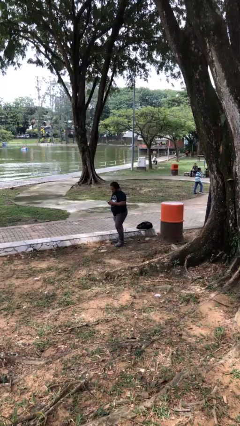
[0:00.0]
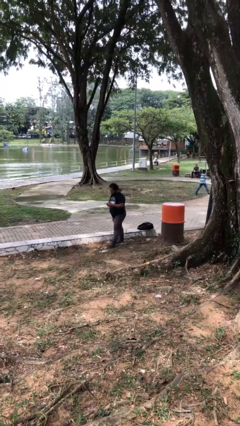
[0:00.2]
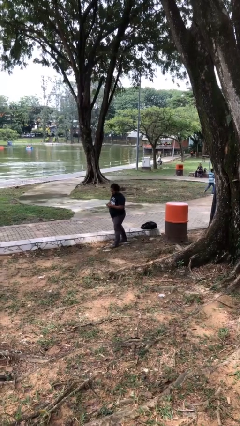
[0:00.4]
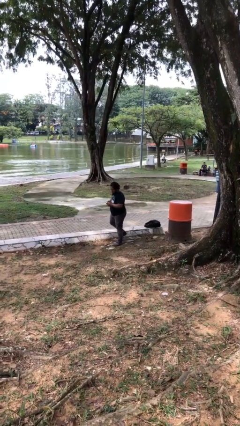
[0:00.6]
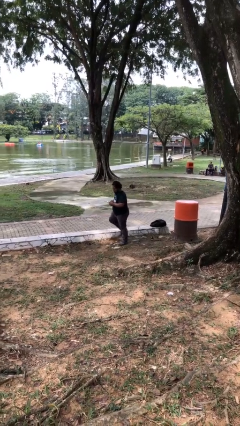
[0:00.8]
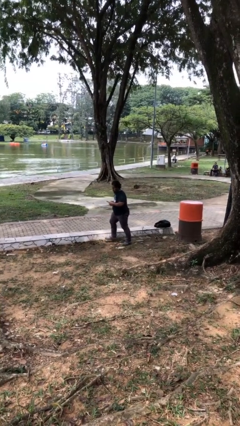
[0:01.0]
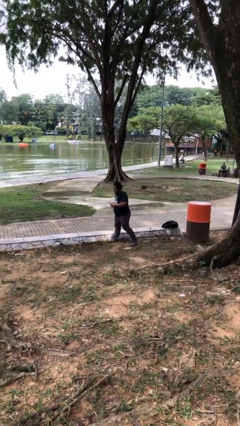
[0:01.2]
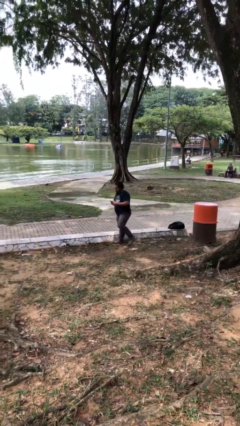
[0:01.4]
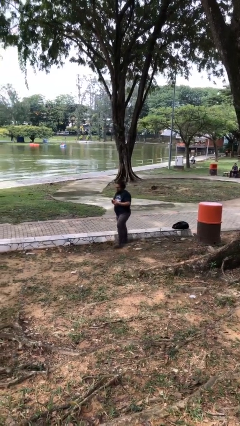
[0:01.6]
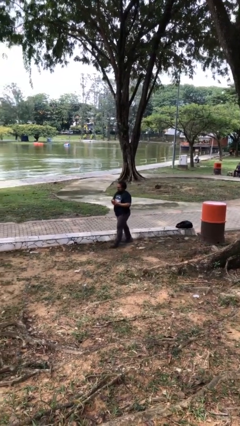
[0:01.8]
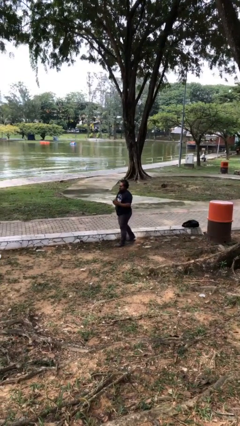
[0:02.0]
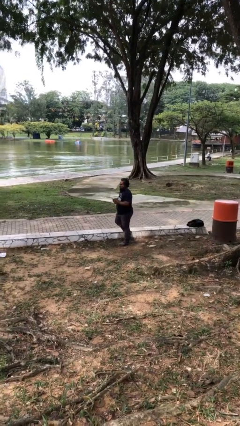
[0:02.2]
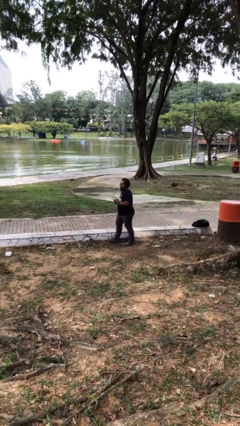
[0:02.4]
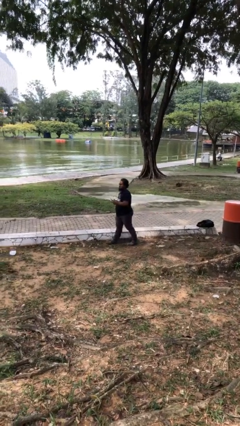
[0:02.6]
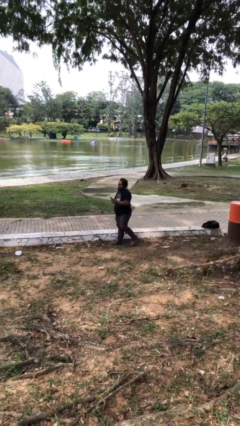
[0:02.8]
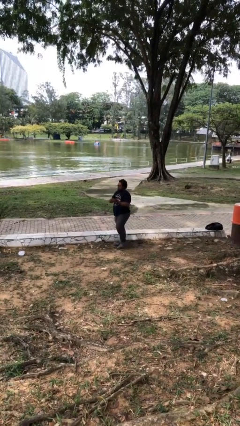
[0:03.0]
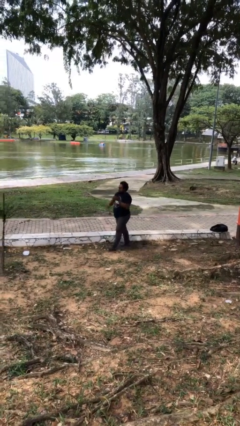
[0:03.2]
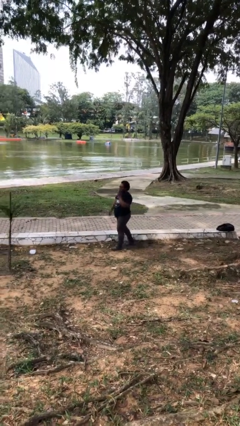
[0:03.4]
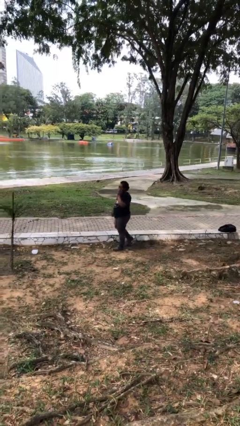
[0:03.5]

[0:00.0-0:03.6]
person texts on phone

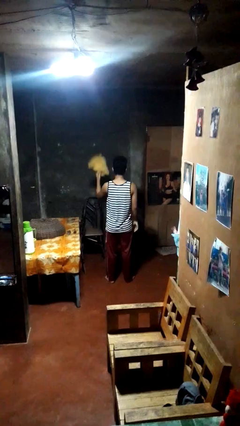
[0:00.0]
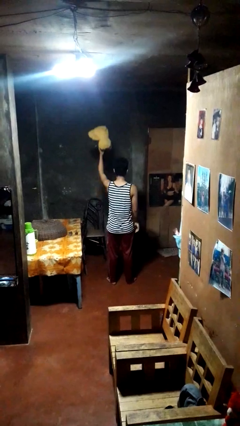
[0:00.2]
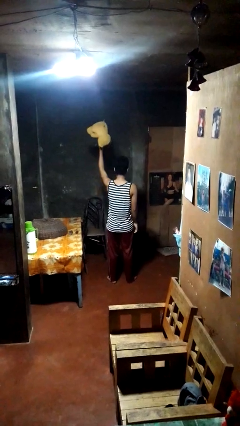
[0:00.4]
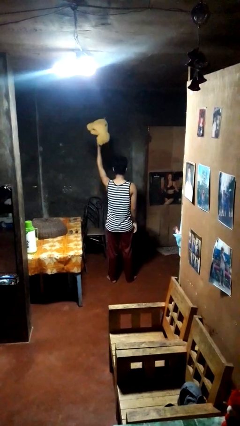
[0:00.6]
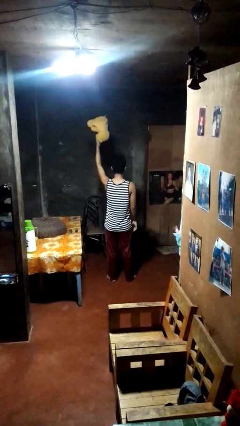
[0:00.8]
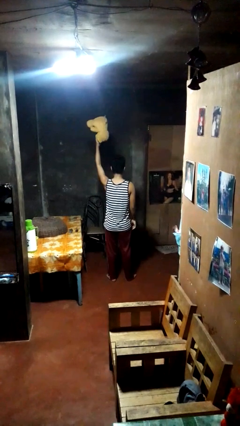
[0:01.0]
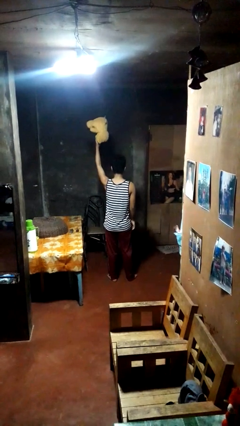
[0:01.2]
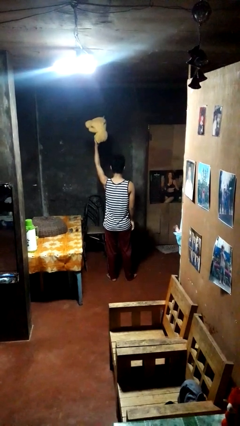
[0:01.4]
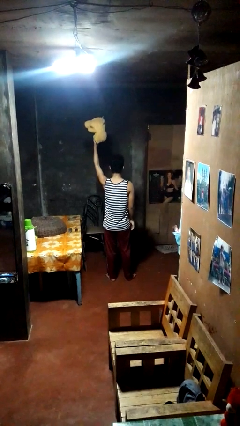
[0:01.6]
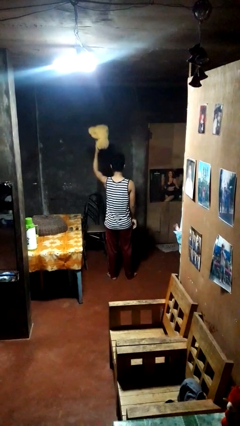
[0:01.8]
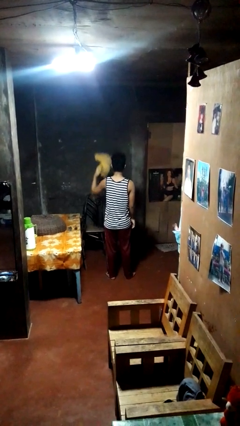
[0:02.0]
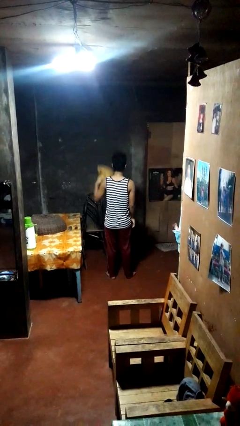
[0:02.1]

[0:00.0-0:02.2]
person holds object above head

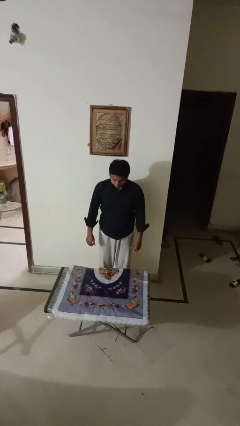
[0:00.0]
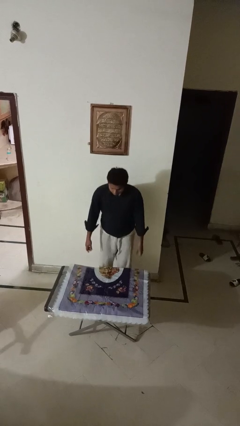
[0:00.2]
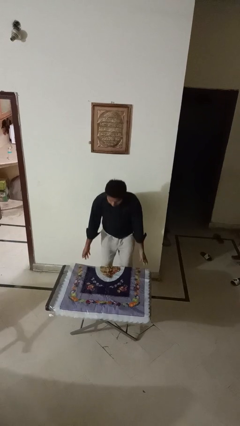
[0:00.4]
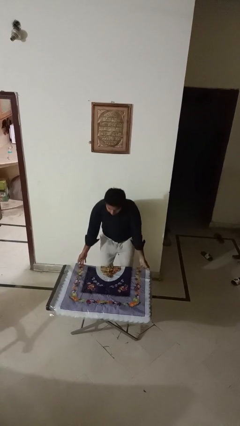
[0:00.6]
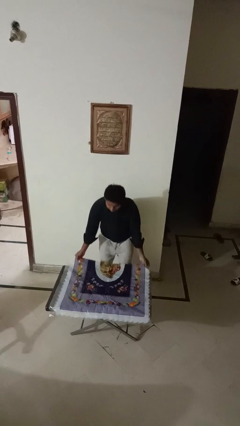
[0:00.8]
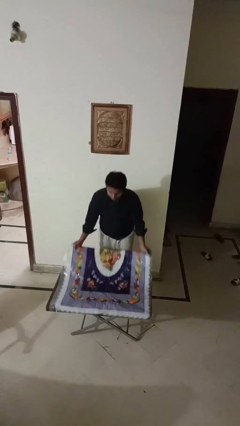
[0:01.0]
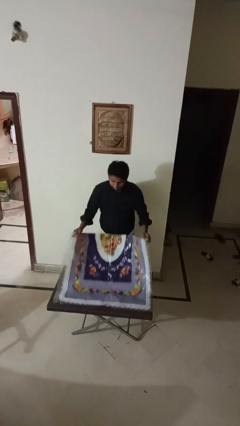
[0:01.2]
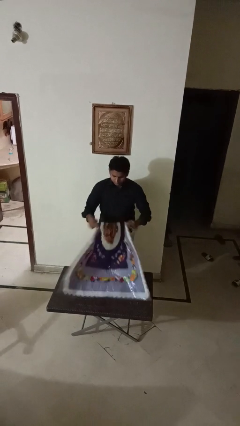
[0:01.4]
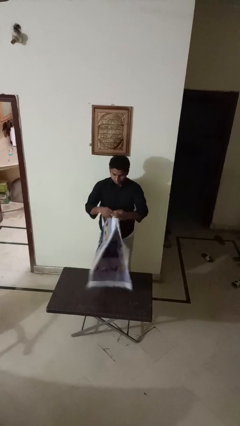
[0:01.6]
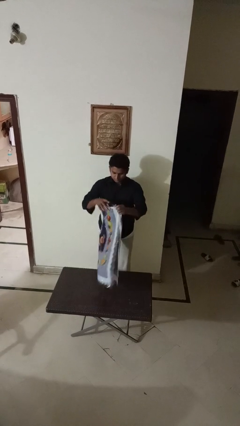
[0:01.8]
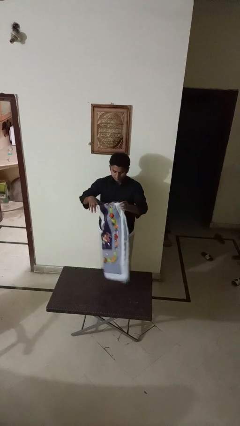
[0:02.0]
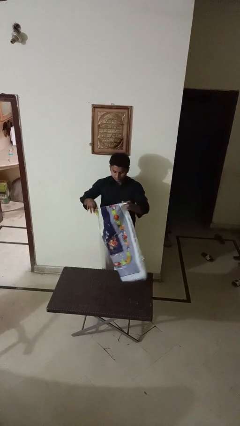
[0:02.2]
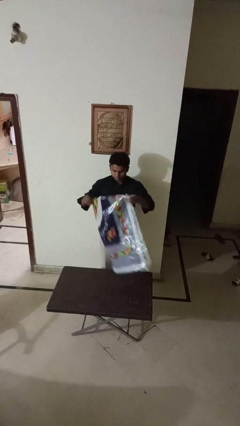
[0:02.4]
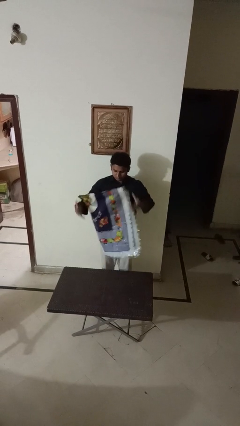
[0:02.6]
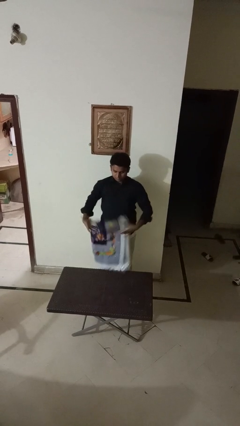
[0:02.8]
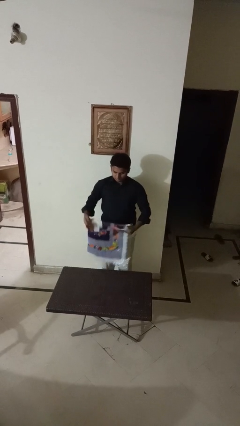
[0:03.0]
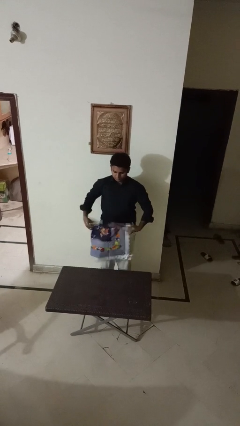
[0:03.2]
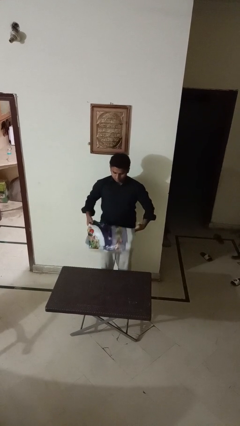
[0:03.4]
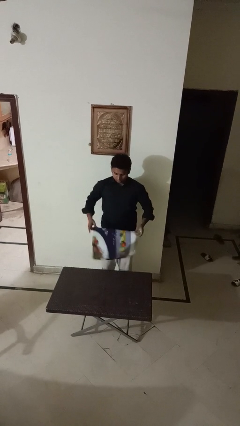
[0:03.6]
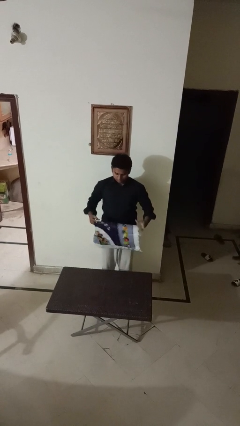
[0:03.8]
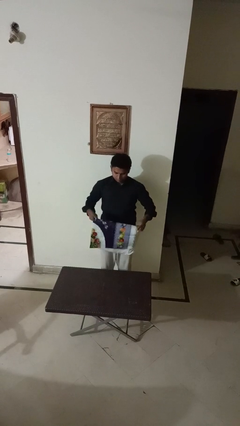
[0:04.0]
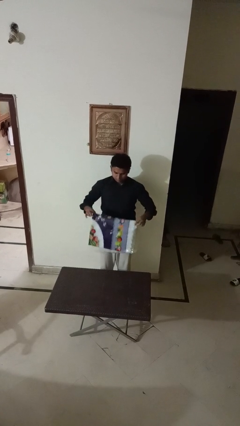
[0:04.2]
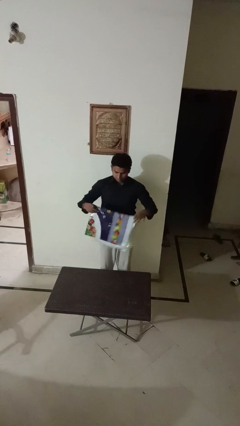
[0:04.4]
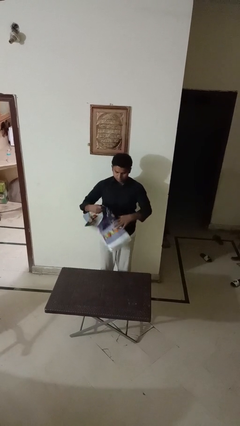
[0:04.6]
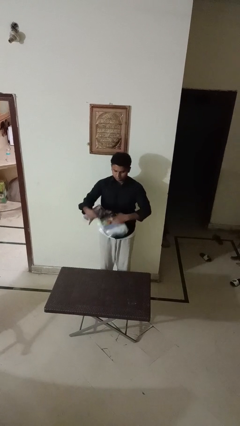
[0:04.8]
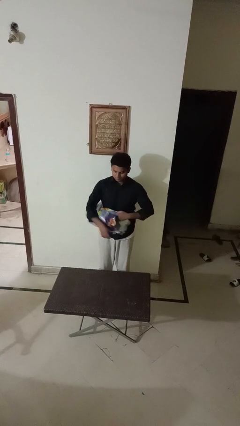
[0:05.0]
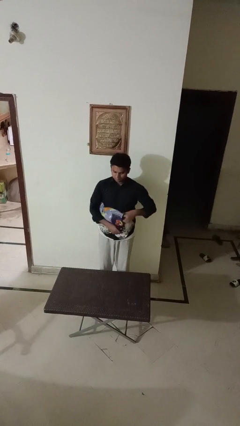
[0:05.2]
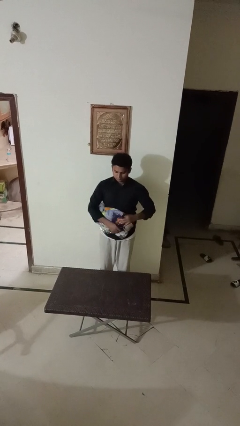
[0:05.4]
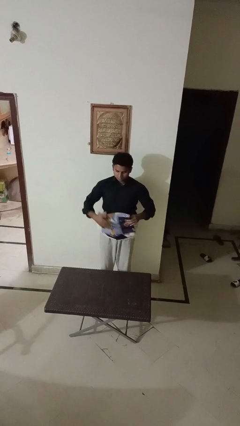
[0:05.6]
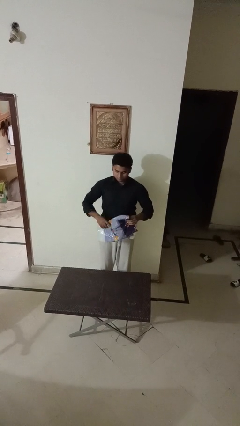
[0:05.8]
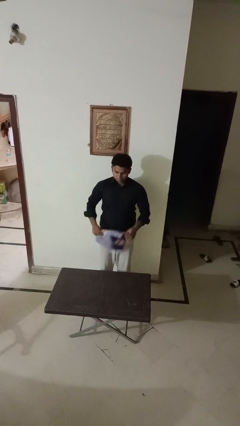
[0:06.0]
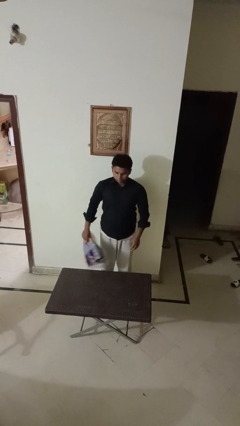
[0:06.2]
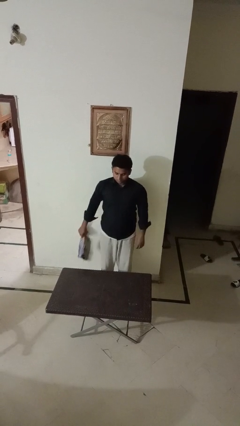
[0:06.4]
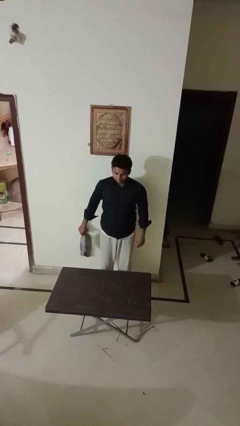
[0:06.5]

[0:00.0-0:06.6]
person folds tablecloth

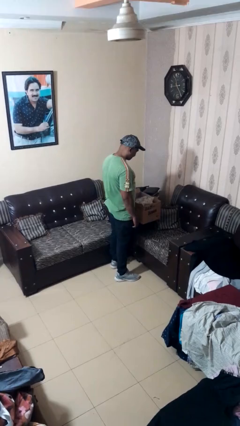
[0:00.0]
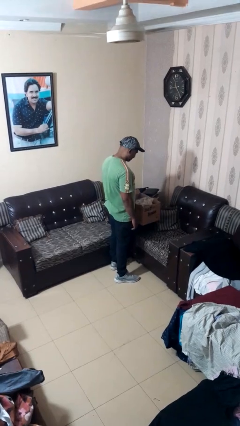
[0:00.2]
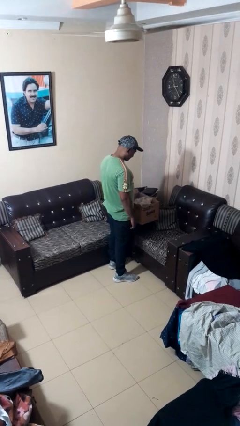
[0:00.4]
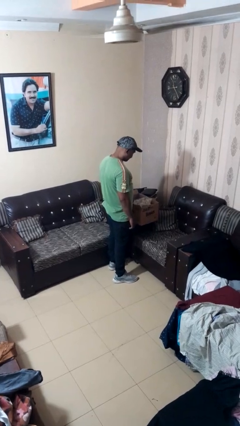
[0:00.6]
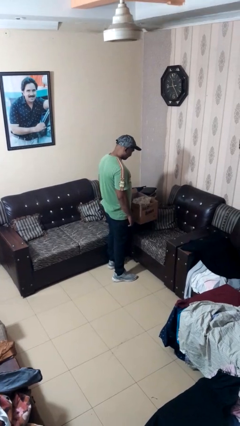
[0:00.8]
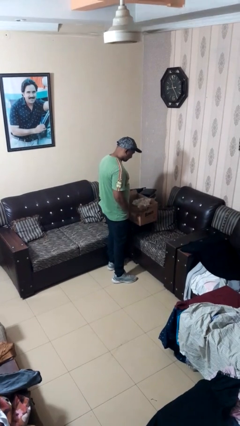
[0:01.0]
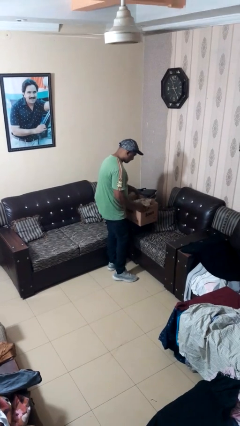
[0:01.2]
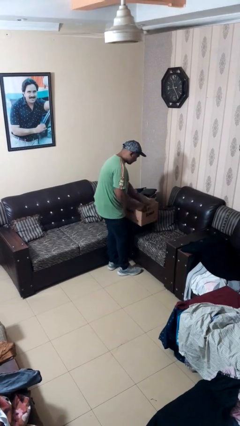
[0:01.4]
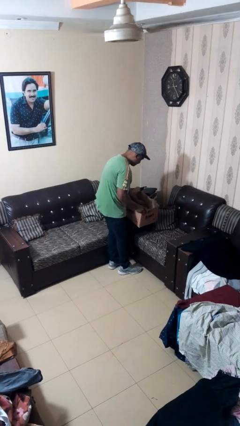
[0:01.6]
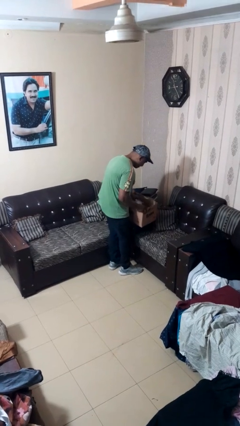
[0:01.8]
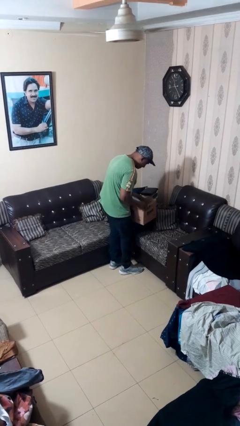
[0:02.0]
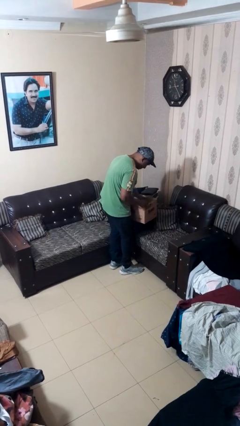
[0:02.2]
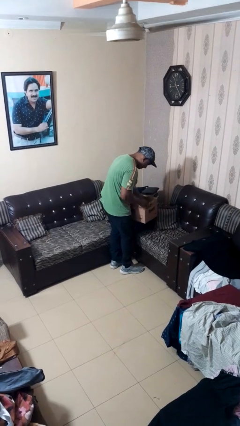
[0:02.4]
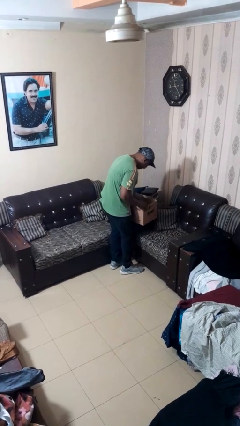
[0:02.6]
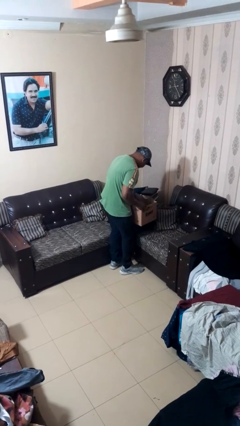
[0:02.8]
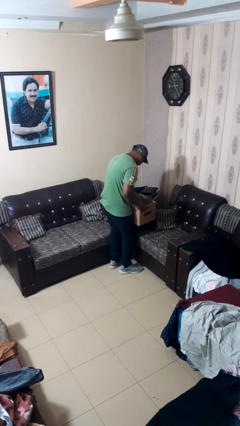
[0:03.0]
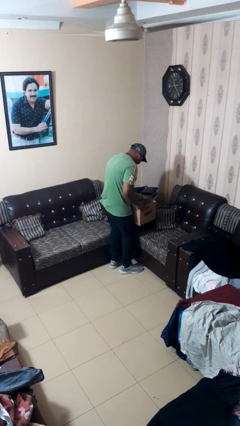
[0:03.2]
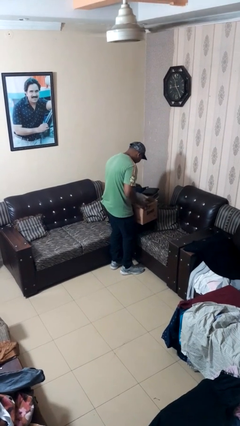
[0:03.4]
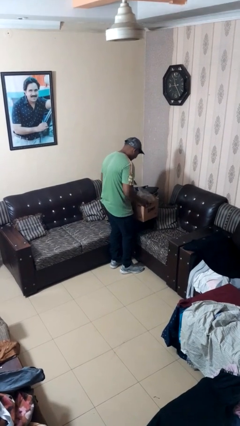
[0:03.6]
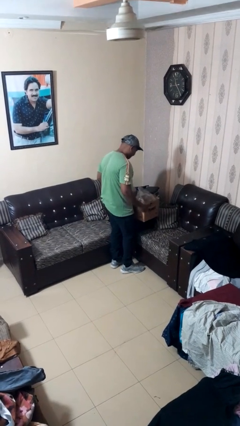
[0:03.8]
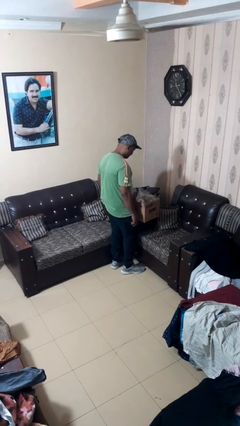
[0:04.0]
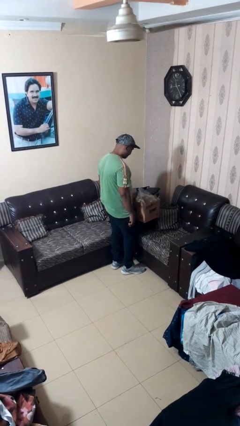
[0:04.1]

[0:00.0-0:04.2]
person searches in box

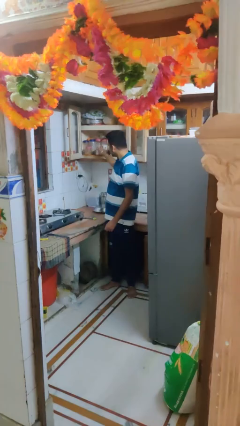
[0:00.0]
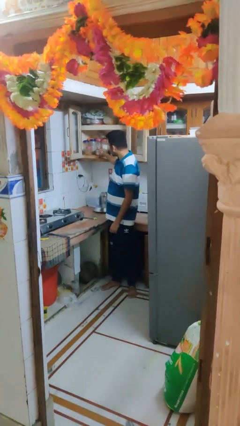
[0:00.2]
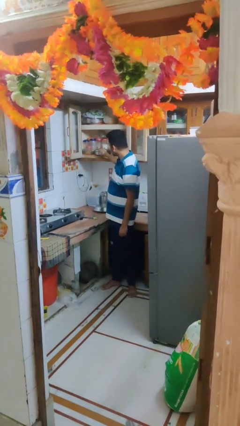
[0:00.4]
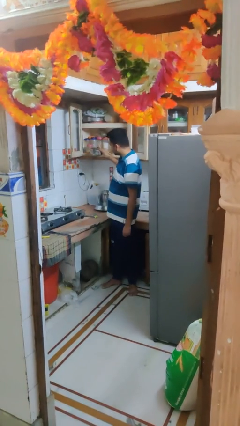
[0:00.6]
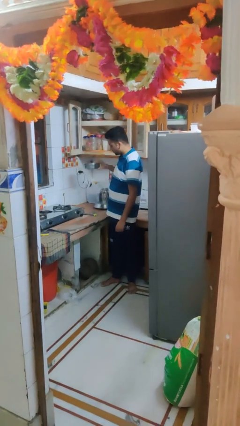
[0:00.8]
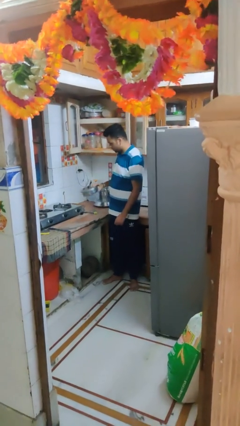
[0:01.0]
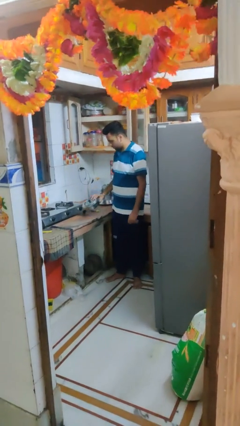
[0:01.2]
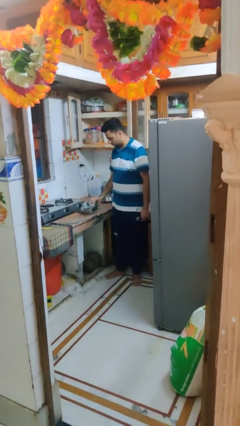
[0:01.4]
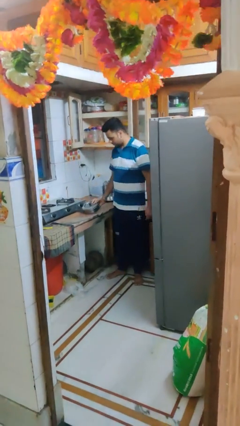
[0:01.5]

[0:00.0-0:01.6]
person takes object from cabinet
